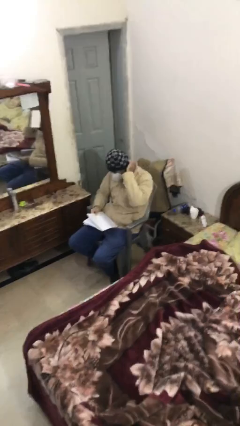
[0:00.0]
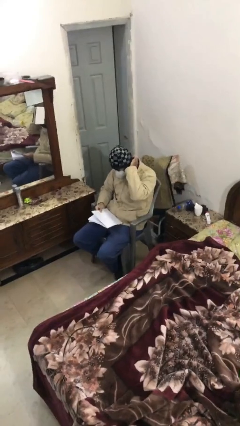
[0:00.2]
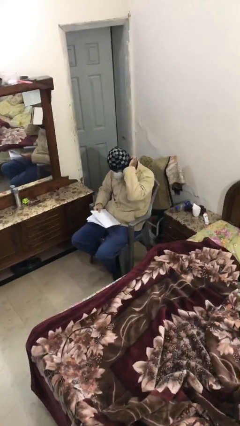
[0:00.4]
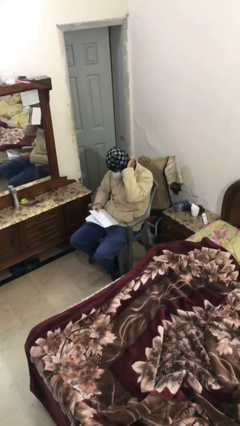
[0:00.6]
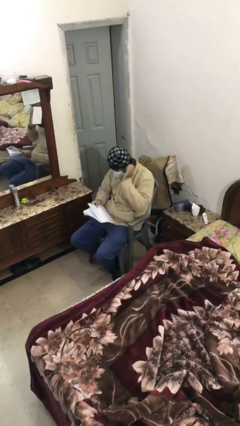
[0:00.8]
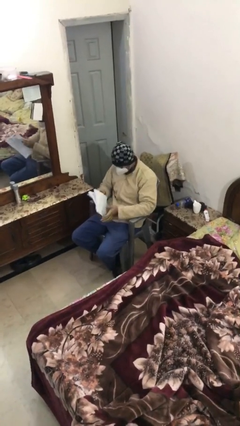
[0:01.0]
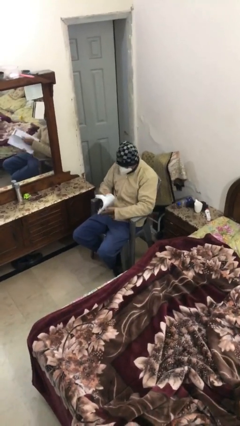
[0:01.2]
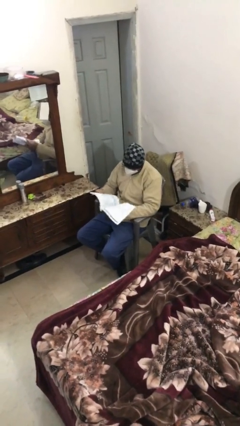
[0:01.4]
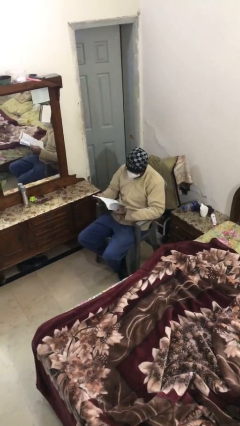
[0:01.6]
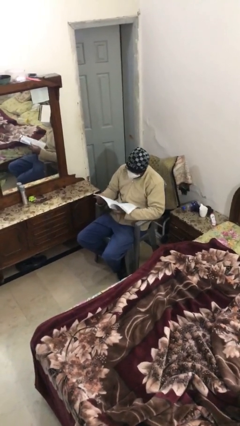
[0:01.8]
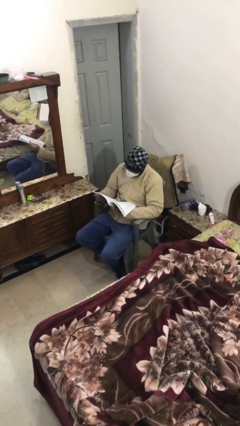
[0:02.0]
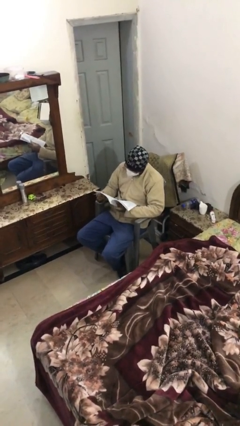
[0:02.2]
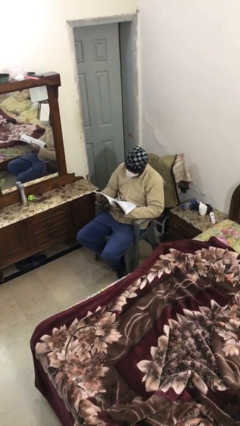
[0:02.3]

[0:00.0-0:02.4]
person reads document

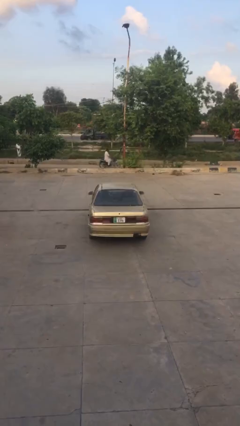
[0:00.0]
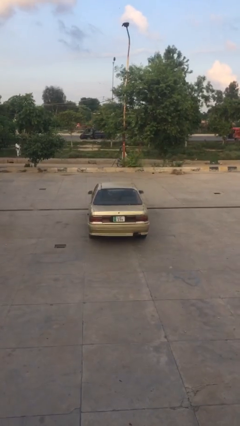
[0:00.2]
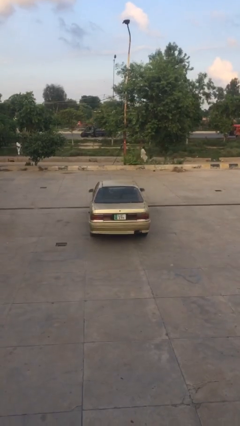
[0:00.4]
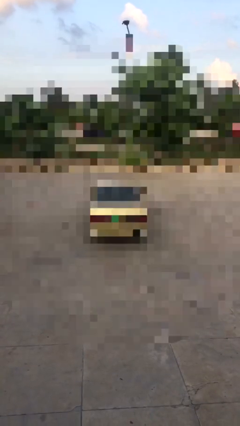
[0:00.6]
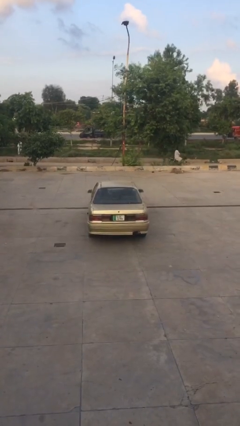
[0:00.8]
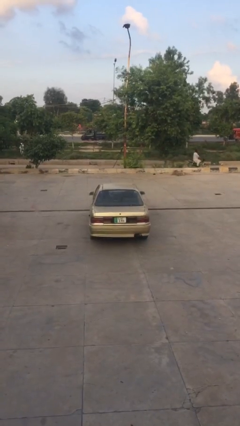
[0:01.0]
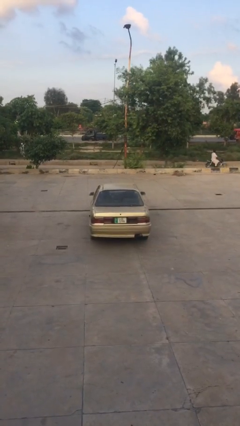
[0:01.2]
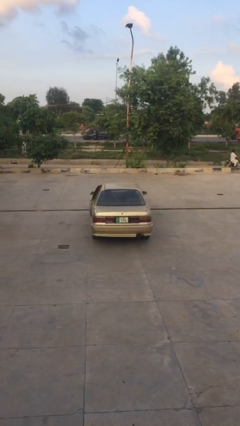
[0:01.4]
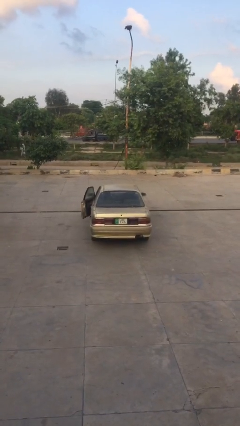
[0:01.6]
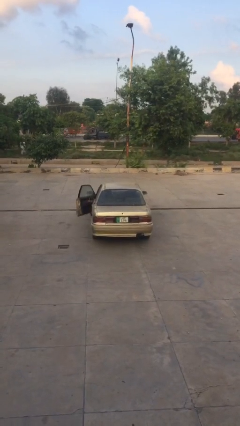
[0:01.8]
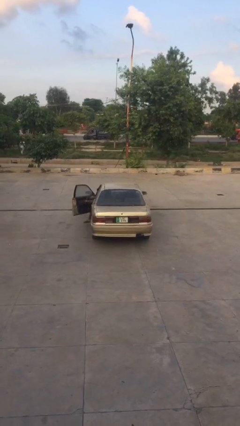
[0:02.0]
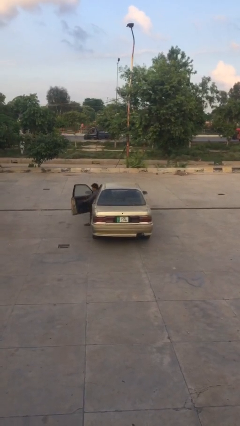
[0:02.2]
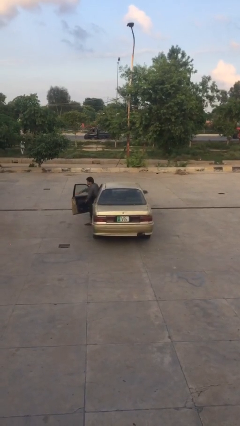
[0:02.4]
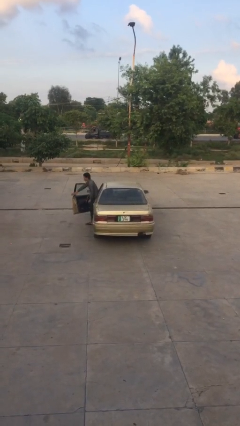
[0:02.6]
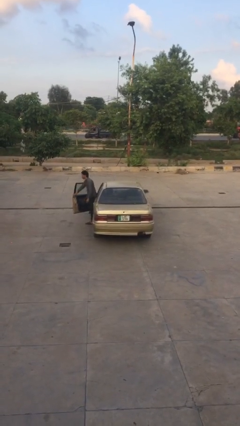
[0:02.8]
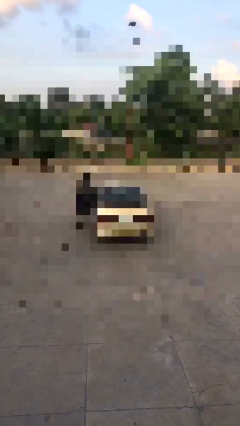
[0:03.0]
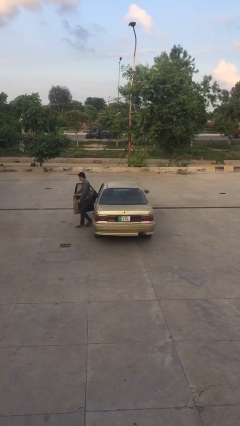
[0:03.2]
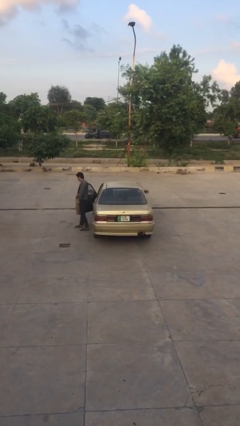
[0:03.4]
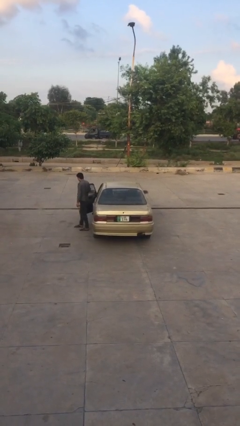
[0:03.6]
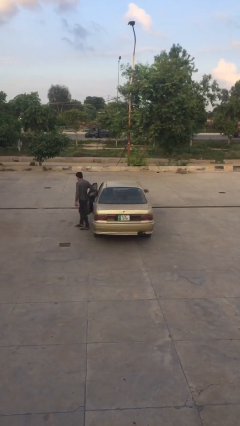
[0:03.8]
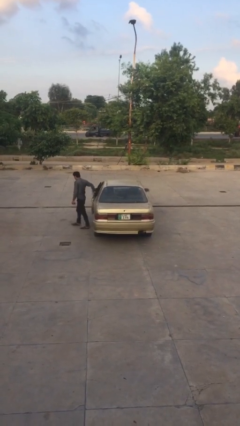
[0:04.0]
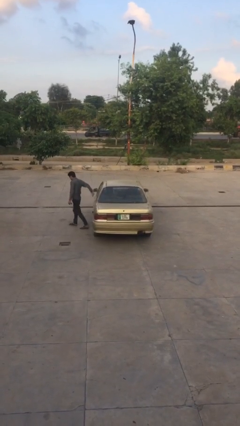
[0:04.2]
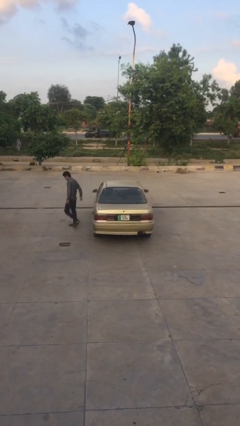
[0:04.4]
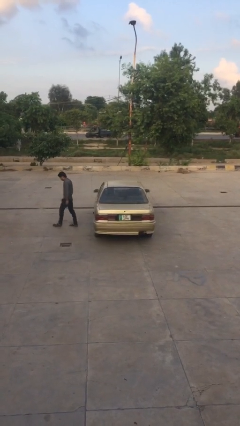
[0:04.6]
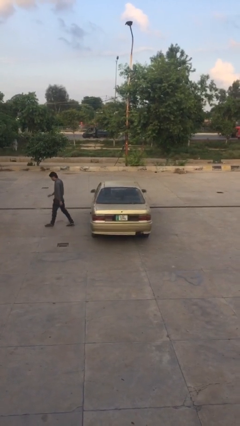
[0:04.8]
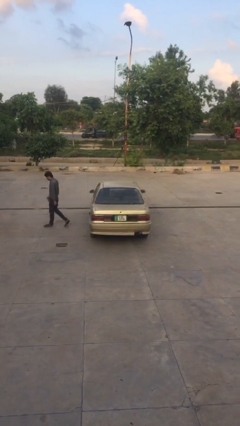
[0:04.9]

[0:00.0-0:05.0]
car drops off person

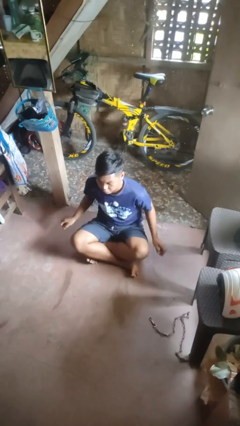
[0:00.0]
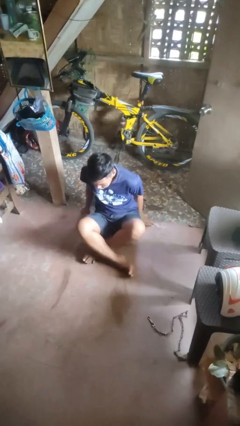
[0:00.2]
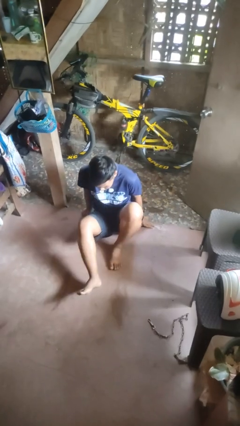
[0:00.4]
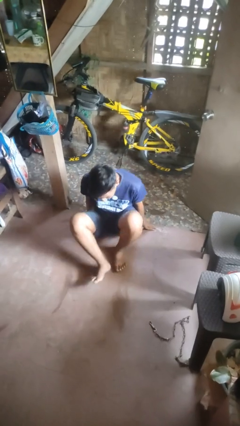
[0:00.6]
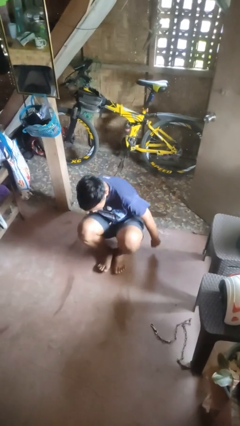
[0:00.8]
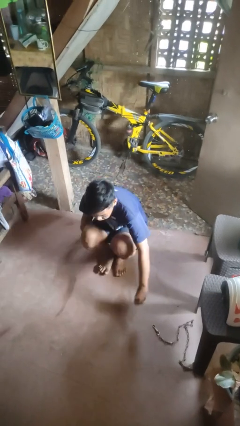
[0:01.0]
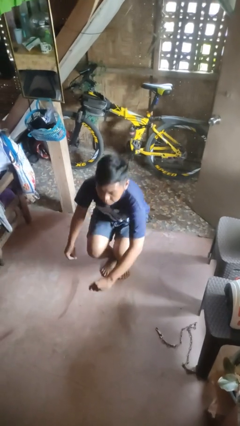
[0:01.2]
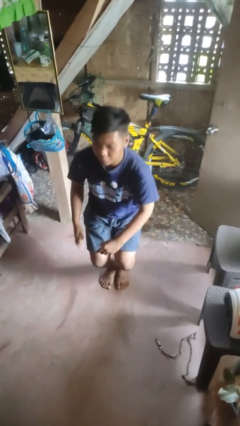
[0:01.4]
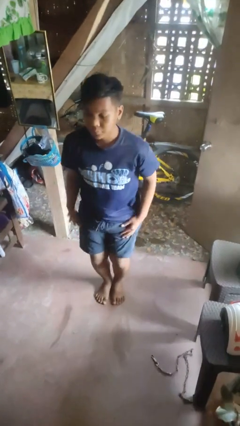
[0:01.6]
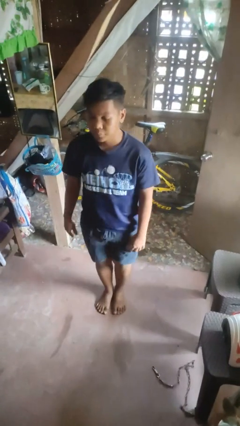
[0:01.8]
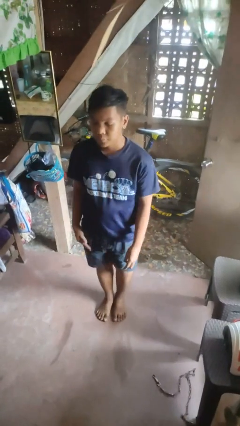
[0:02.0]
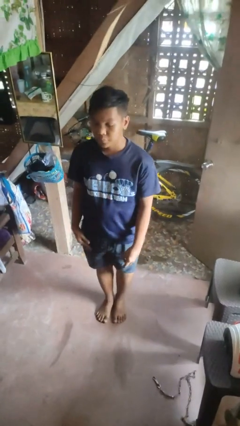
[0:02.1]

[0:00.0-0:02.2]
person stands up from floor

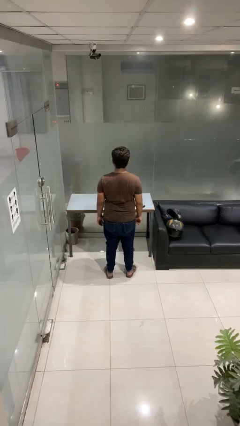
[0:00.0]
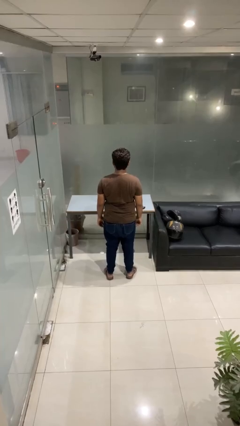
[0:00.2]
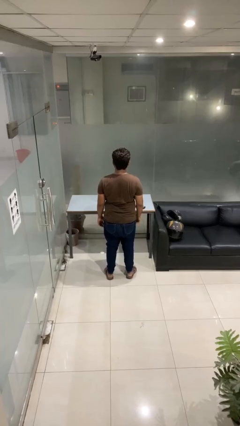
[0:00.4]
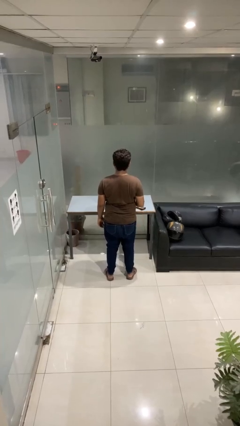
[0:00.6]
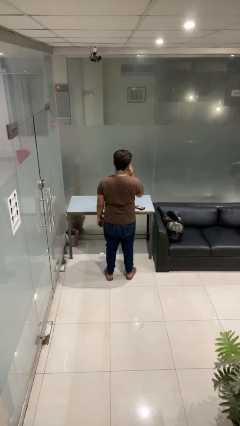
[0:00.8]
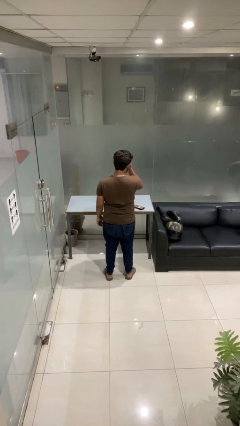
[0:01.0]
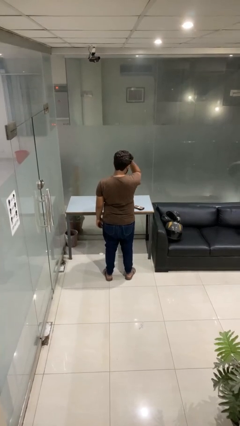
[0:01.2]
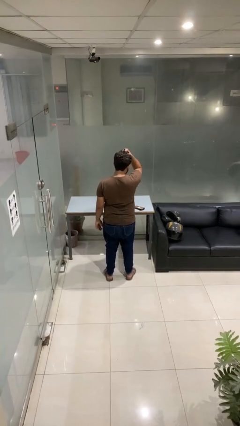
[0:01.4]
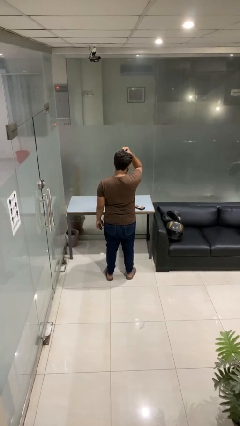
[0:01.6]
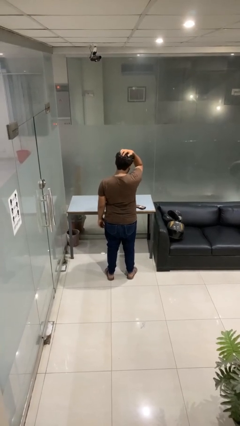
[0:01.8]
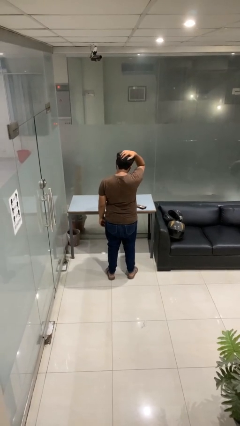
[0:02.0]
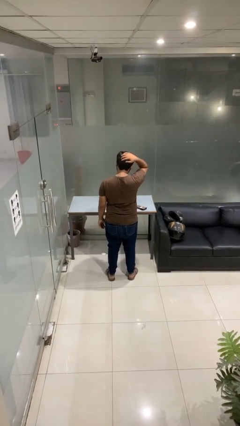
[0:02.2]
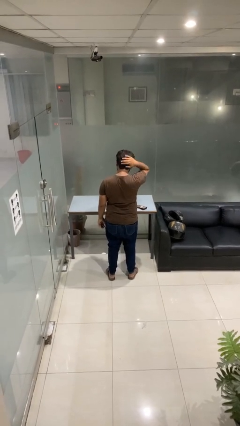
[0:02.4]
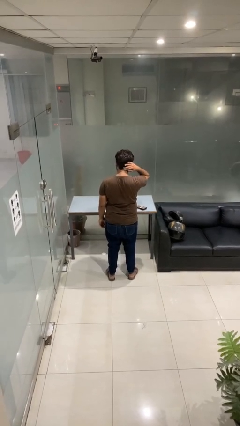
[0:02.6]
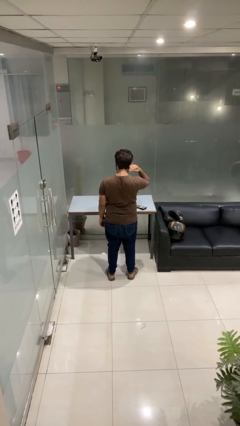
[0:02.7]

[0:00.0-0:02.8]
person strokes hair

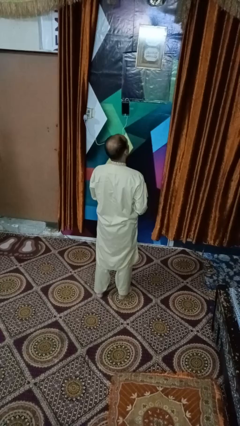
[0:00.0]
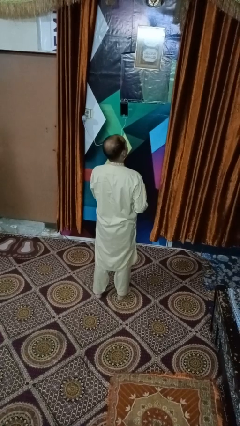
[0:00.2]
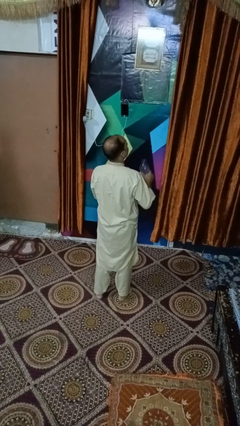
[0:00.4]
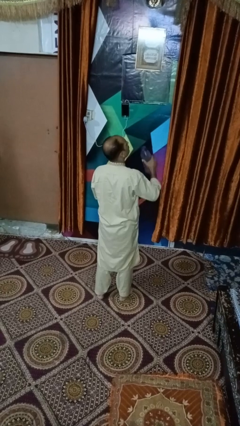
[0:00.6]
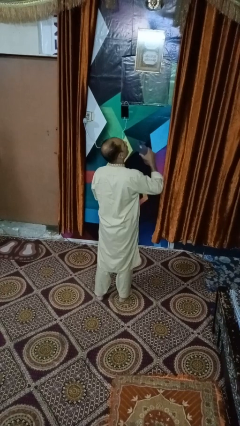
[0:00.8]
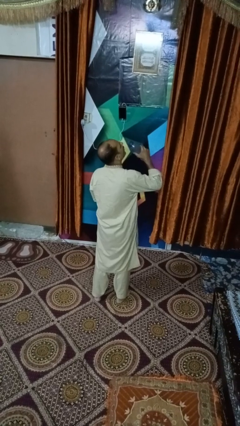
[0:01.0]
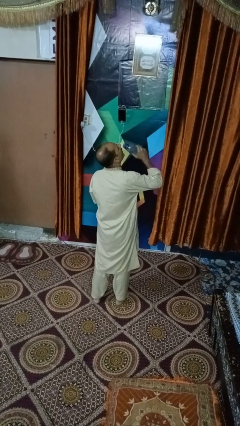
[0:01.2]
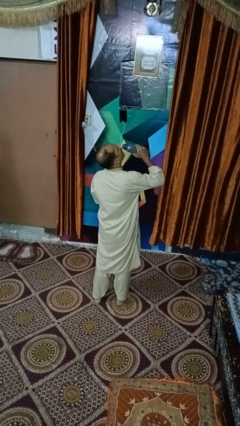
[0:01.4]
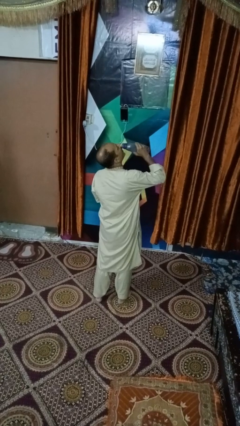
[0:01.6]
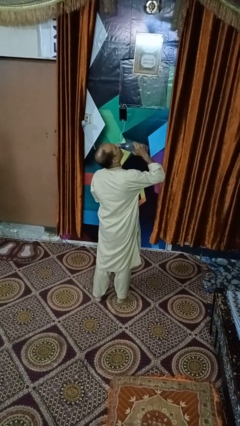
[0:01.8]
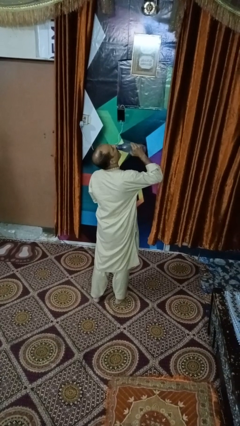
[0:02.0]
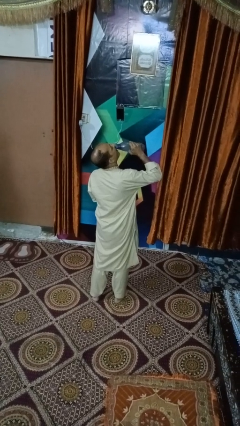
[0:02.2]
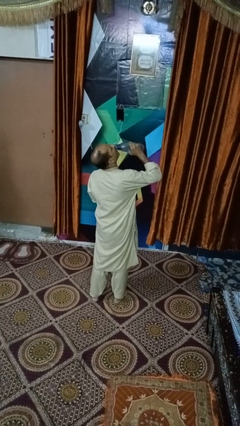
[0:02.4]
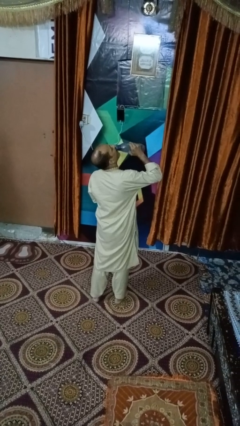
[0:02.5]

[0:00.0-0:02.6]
person drinks from bottle

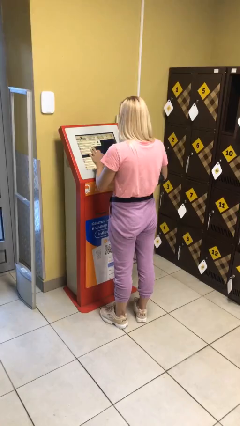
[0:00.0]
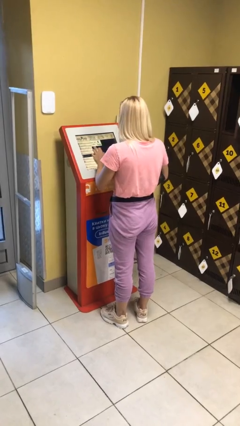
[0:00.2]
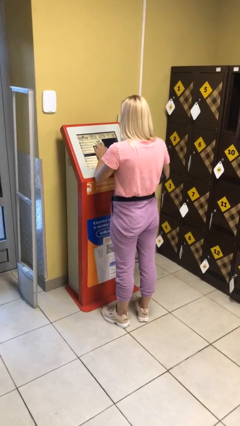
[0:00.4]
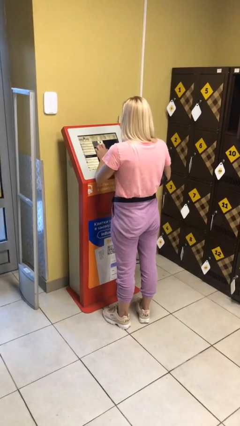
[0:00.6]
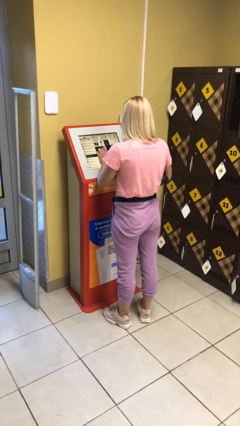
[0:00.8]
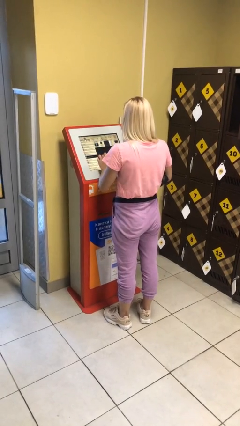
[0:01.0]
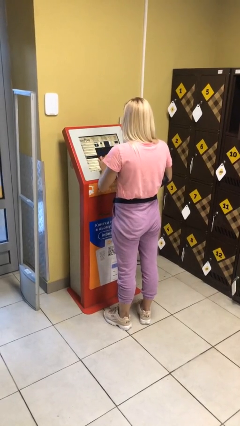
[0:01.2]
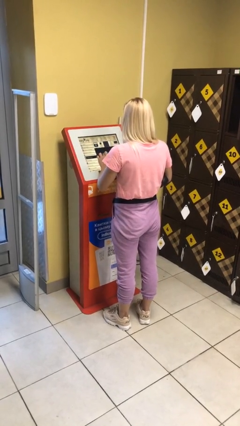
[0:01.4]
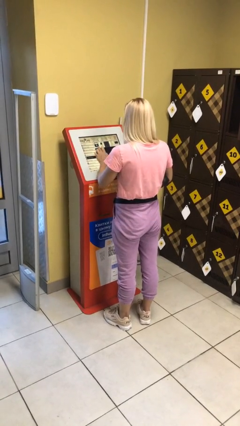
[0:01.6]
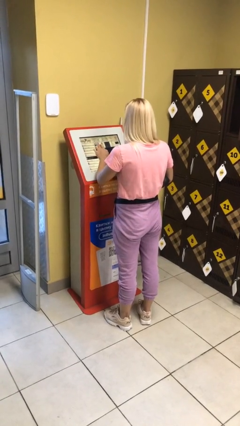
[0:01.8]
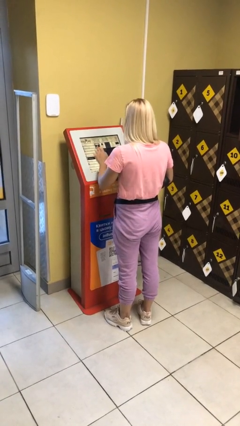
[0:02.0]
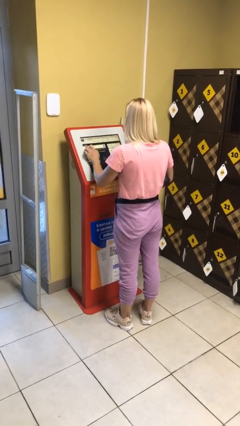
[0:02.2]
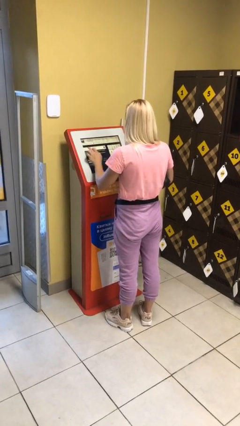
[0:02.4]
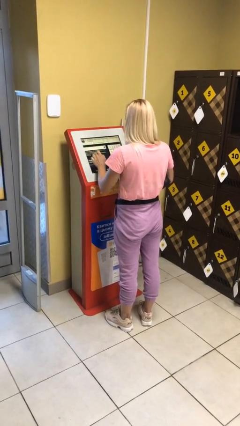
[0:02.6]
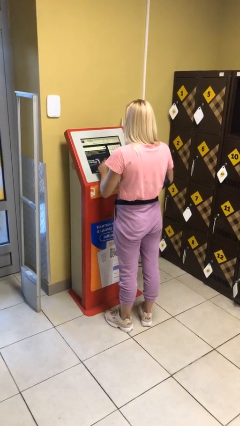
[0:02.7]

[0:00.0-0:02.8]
person purchases from machine
